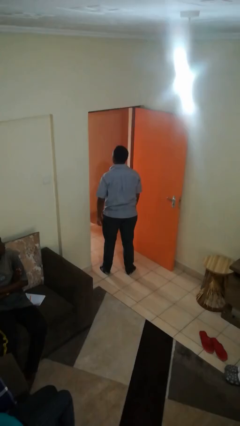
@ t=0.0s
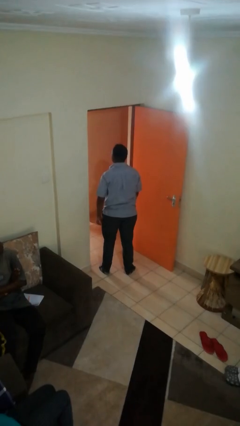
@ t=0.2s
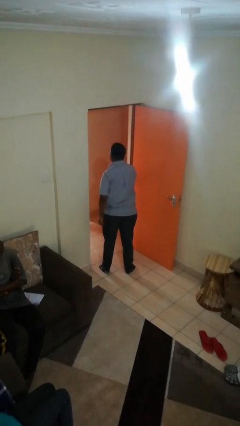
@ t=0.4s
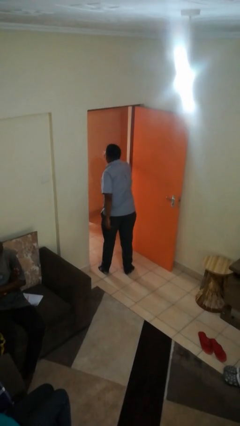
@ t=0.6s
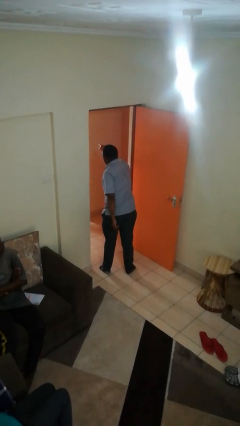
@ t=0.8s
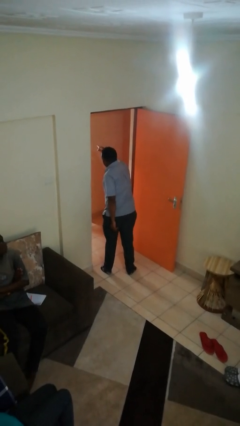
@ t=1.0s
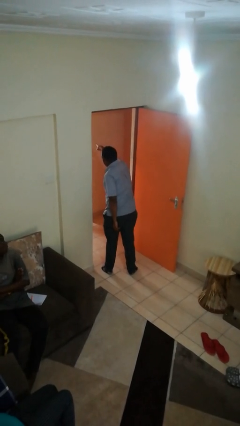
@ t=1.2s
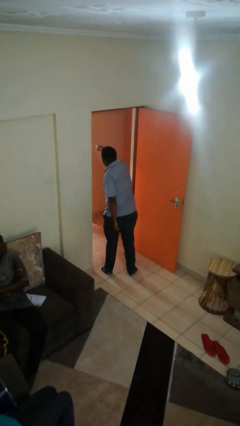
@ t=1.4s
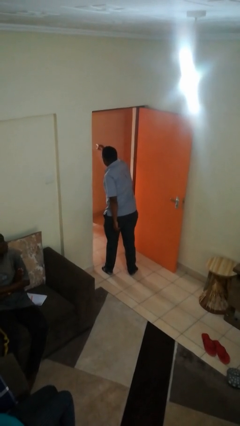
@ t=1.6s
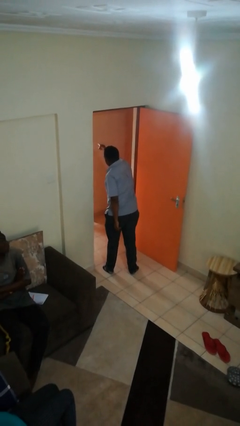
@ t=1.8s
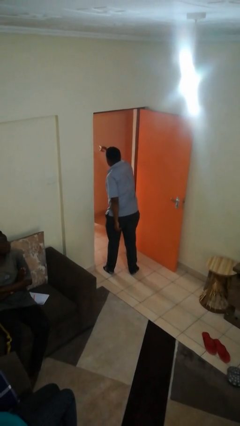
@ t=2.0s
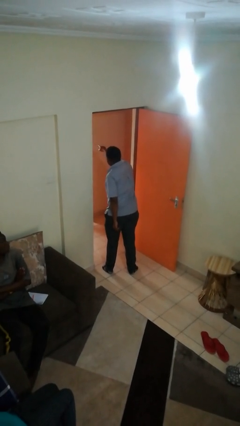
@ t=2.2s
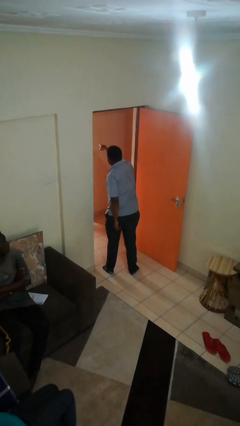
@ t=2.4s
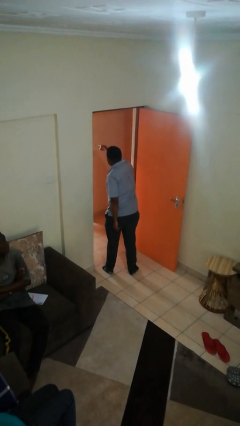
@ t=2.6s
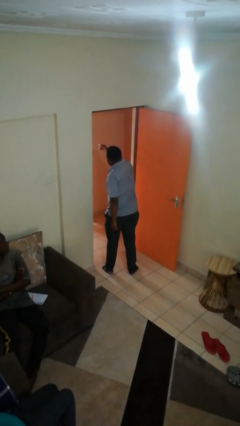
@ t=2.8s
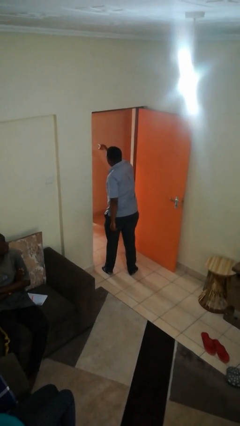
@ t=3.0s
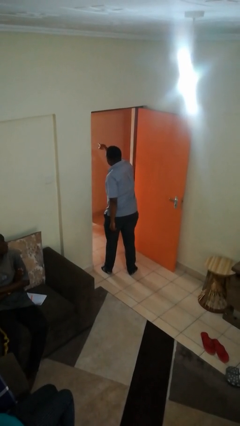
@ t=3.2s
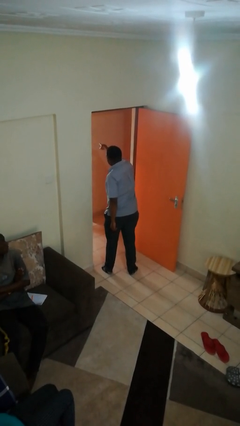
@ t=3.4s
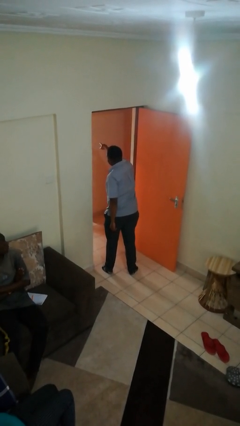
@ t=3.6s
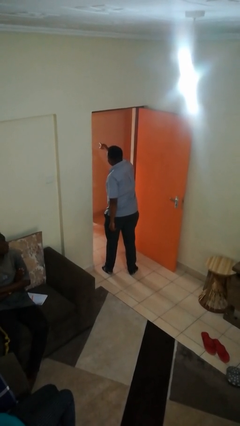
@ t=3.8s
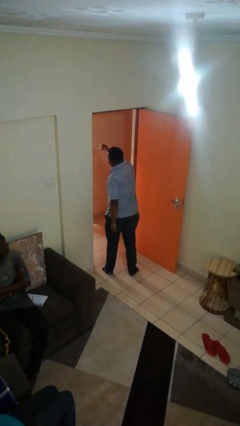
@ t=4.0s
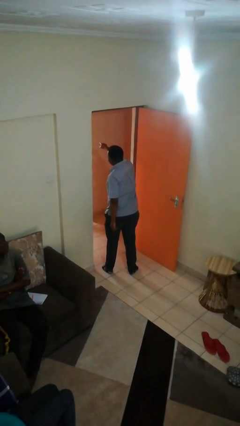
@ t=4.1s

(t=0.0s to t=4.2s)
person points at person

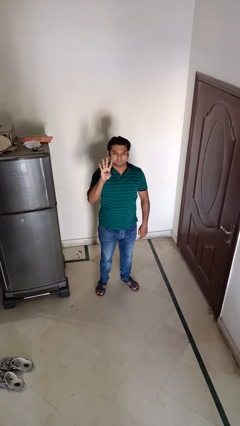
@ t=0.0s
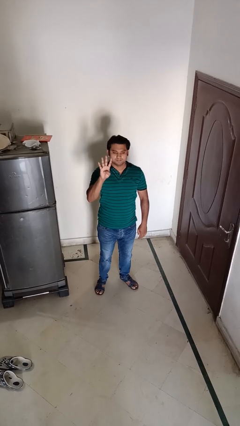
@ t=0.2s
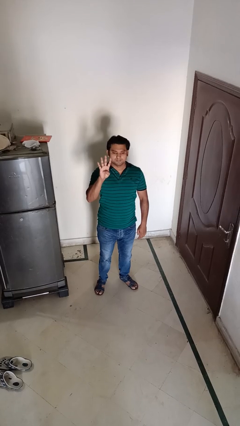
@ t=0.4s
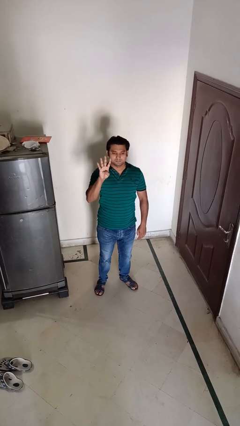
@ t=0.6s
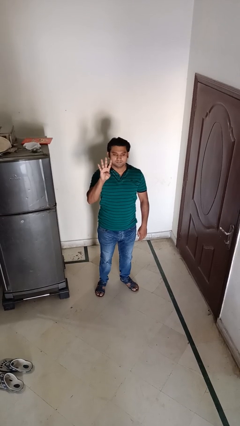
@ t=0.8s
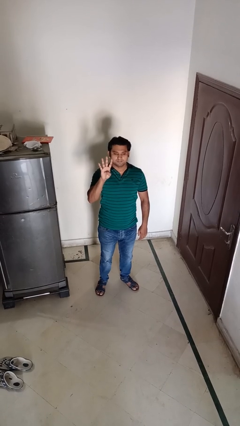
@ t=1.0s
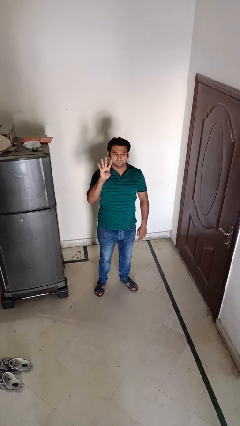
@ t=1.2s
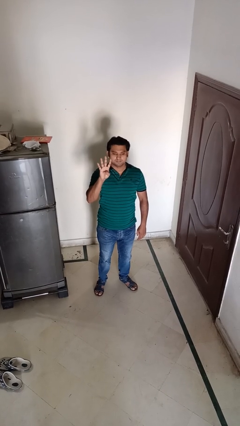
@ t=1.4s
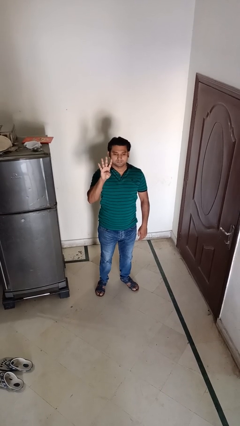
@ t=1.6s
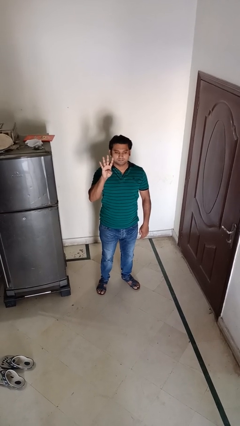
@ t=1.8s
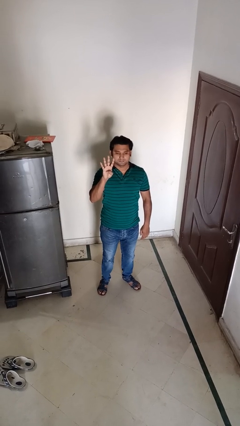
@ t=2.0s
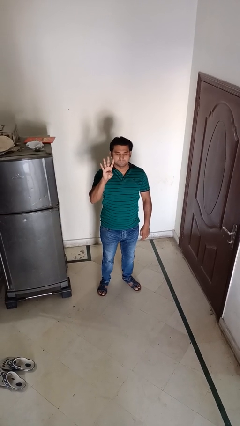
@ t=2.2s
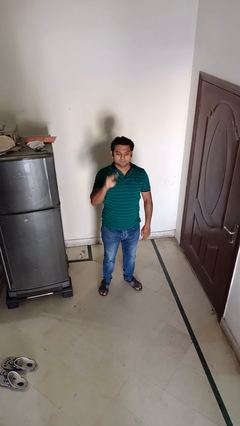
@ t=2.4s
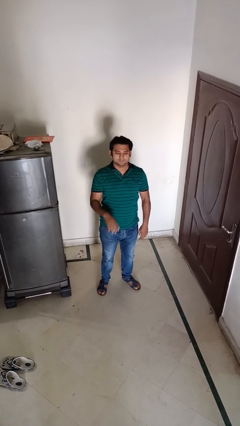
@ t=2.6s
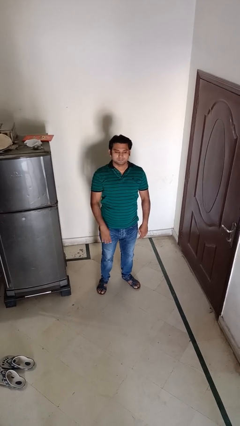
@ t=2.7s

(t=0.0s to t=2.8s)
person gestures number four

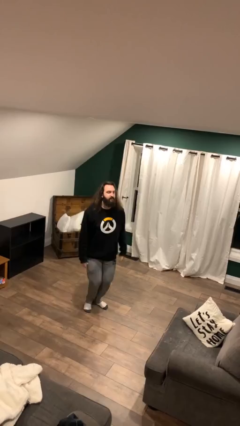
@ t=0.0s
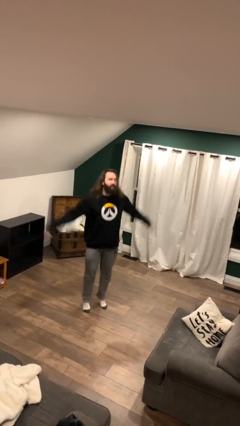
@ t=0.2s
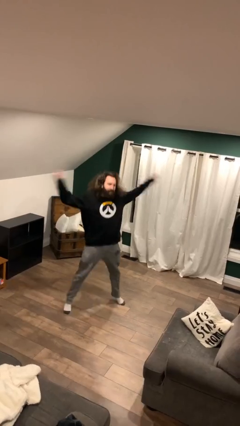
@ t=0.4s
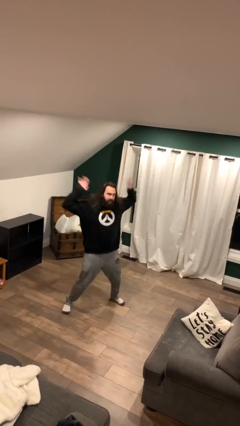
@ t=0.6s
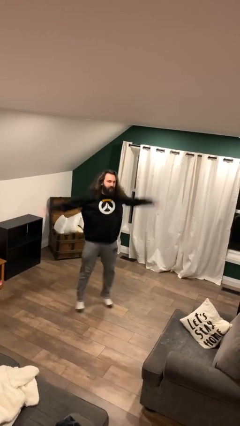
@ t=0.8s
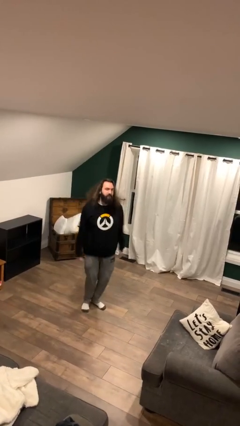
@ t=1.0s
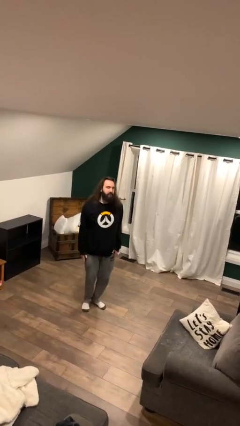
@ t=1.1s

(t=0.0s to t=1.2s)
person exercises with jumping jacks

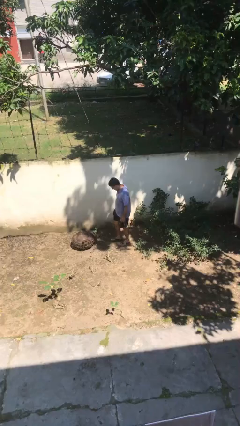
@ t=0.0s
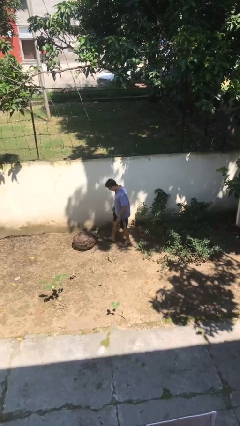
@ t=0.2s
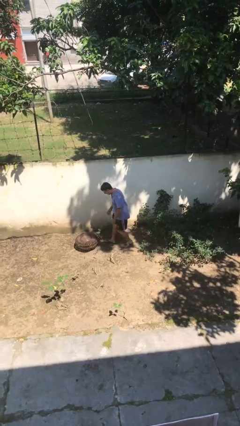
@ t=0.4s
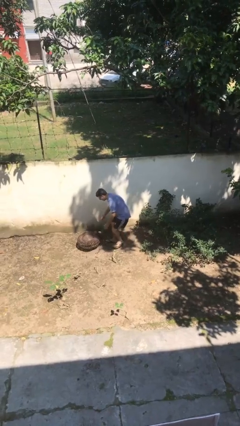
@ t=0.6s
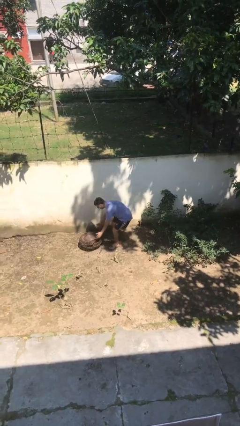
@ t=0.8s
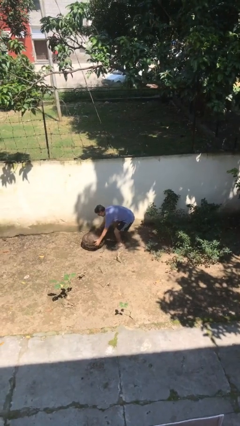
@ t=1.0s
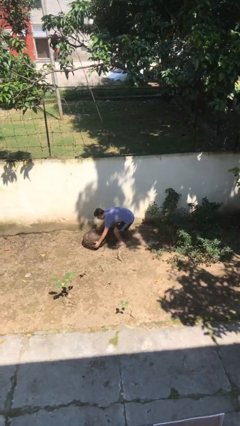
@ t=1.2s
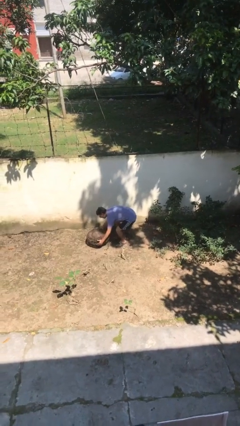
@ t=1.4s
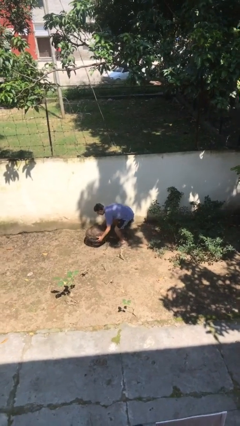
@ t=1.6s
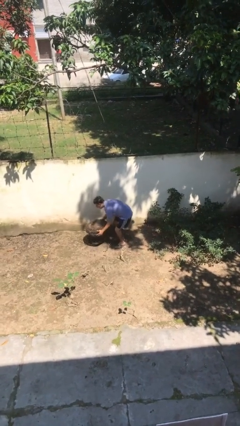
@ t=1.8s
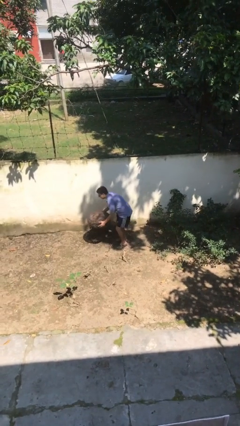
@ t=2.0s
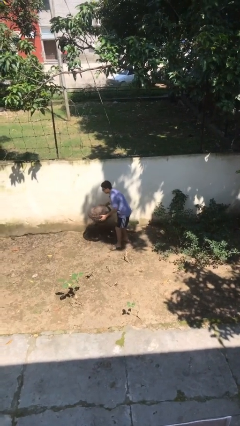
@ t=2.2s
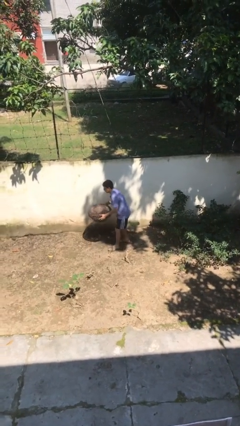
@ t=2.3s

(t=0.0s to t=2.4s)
person picks up object from floor

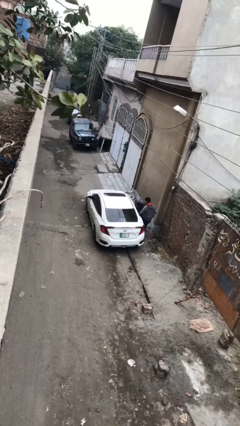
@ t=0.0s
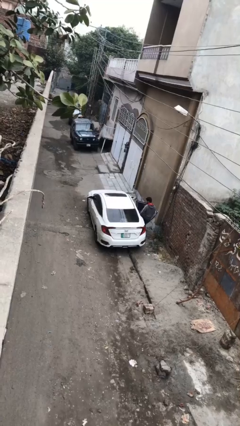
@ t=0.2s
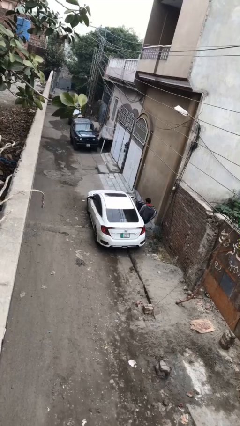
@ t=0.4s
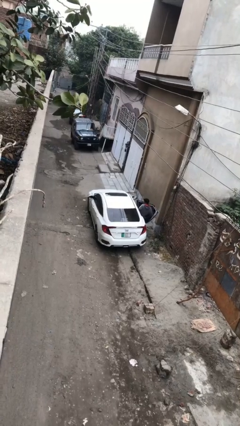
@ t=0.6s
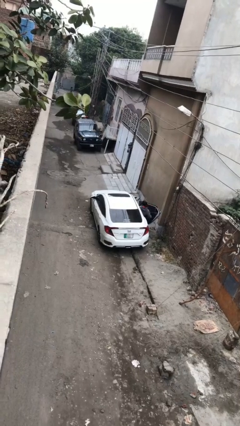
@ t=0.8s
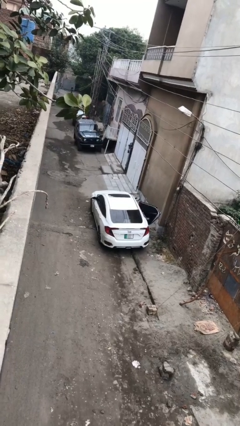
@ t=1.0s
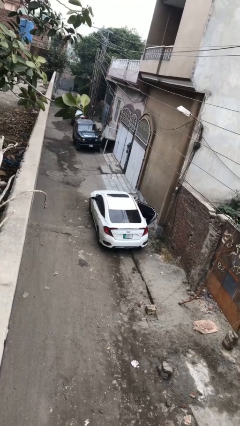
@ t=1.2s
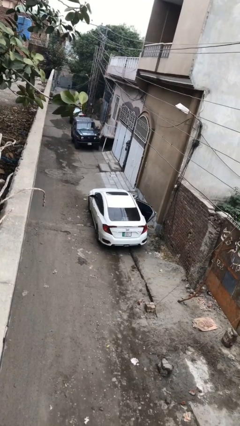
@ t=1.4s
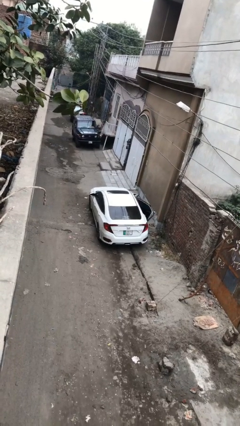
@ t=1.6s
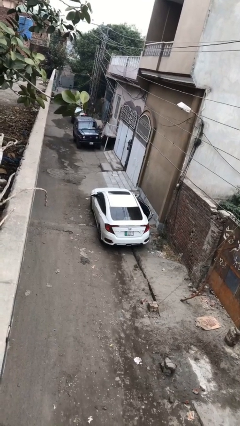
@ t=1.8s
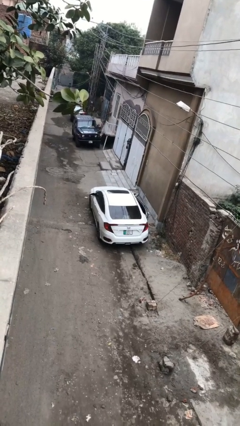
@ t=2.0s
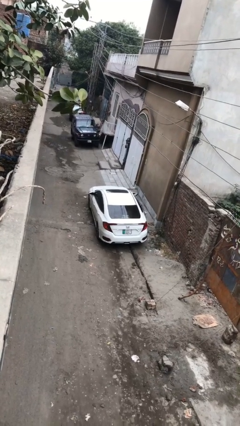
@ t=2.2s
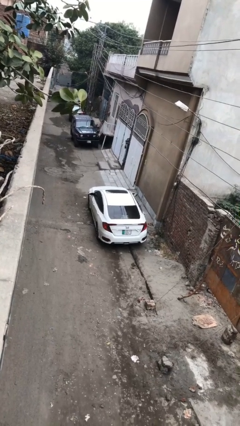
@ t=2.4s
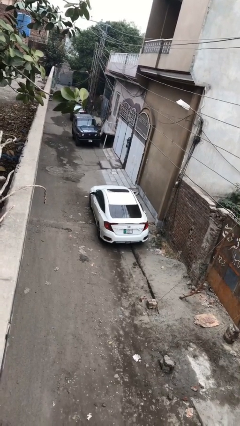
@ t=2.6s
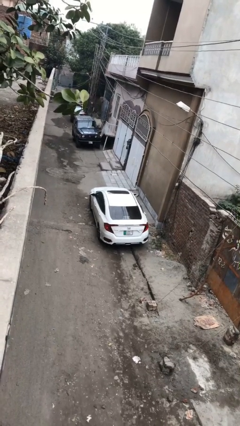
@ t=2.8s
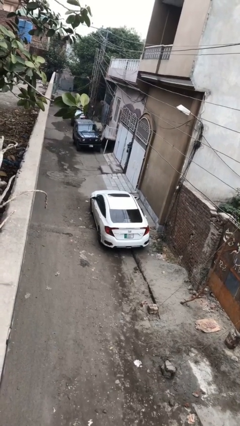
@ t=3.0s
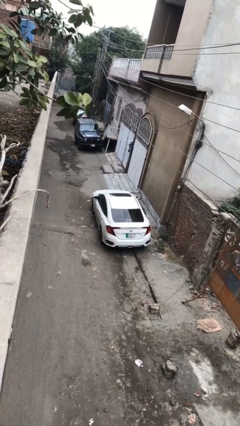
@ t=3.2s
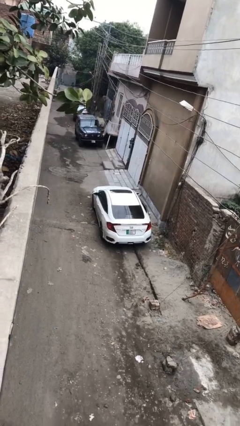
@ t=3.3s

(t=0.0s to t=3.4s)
car picks up person

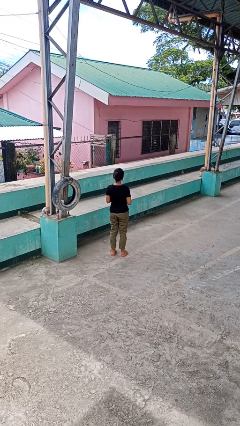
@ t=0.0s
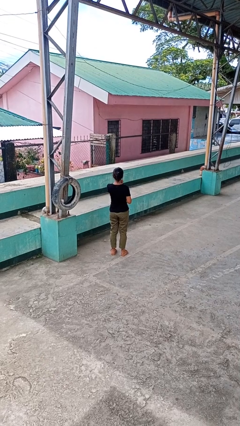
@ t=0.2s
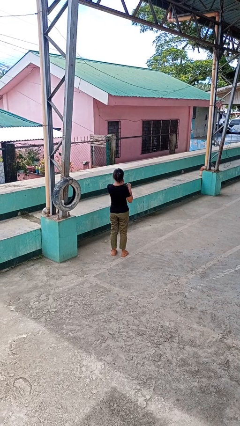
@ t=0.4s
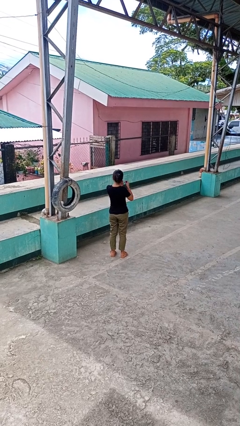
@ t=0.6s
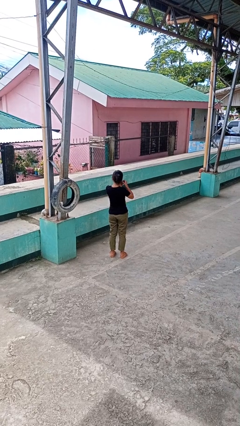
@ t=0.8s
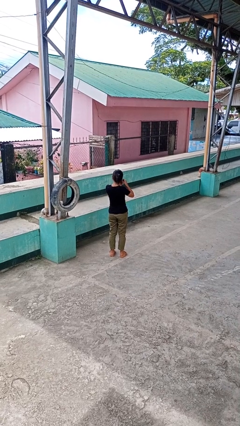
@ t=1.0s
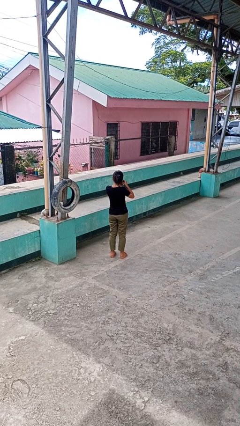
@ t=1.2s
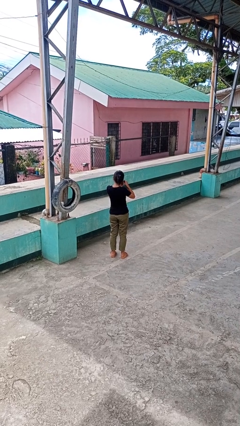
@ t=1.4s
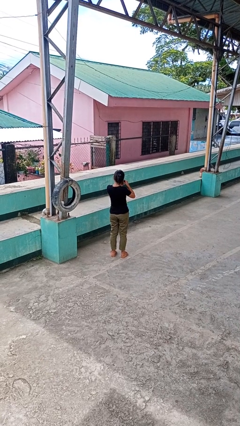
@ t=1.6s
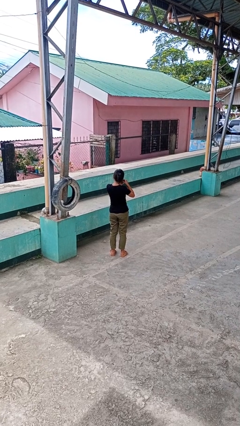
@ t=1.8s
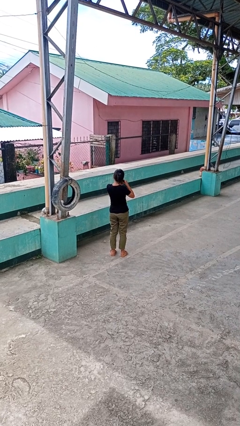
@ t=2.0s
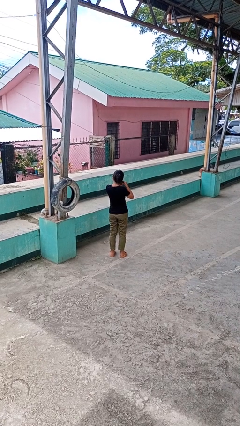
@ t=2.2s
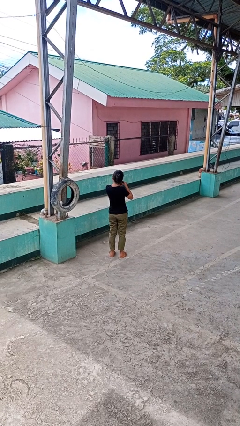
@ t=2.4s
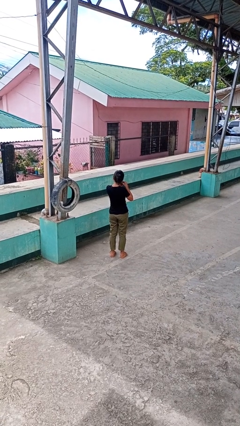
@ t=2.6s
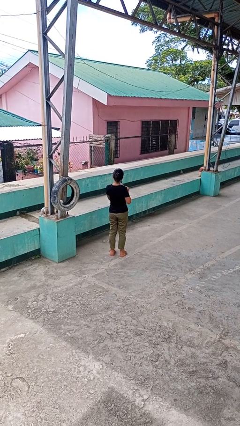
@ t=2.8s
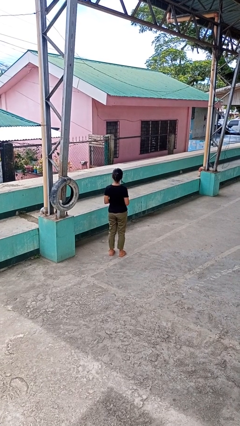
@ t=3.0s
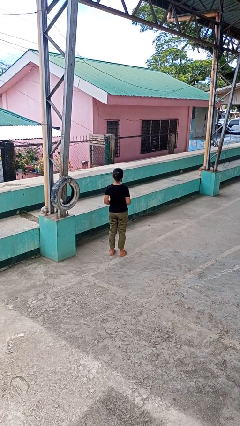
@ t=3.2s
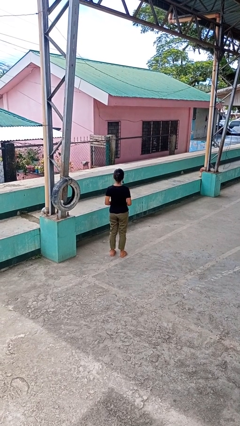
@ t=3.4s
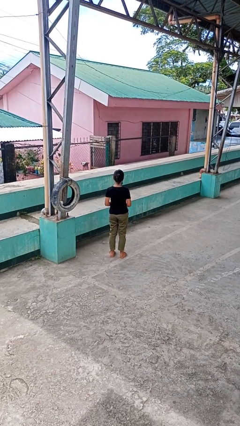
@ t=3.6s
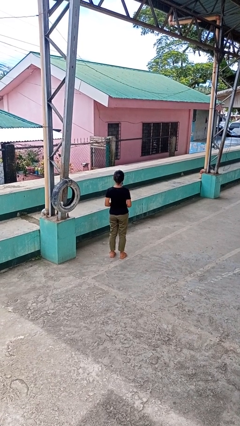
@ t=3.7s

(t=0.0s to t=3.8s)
person puts on earrings
